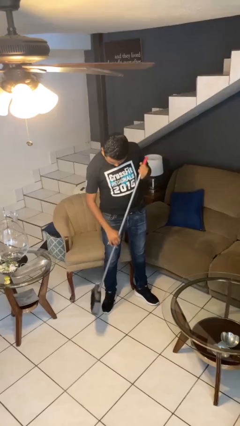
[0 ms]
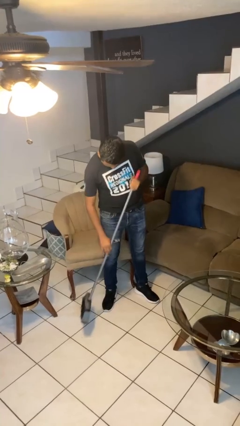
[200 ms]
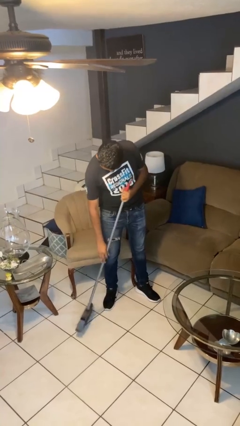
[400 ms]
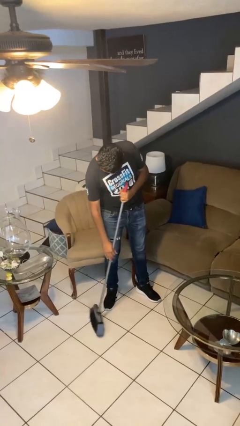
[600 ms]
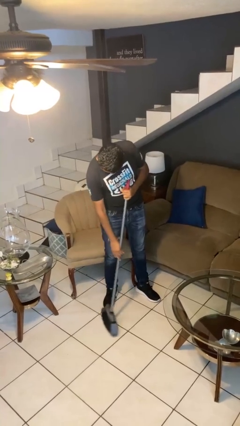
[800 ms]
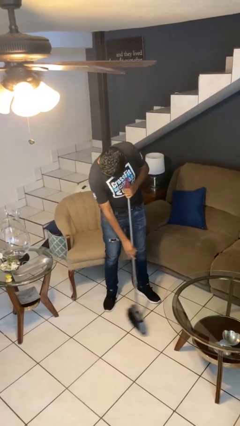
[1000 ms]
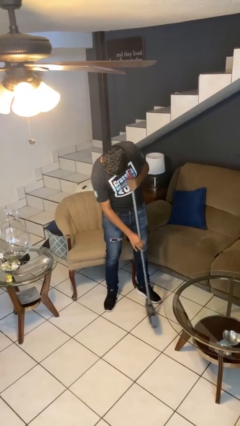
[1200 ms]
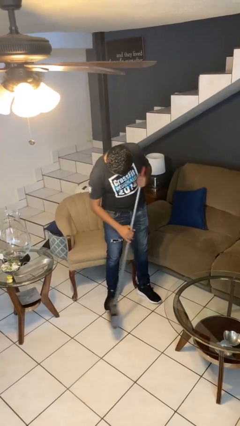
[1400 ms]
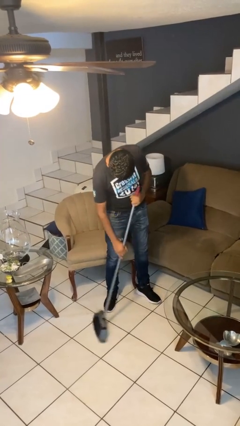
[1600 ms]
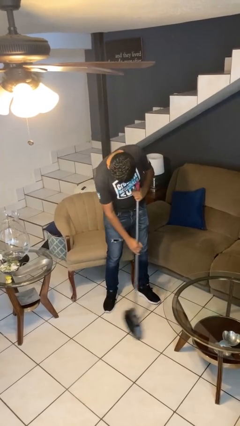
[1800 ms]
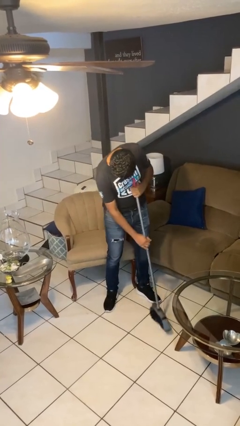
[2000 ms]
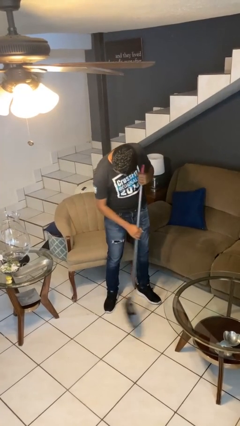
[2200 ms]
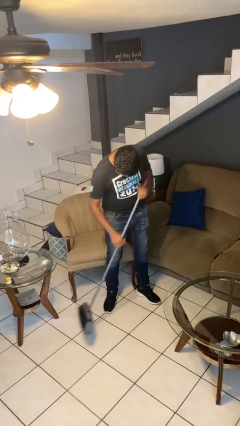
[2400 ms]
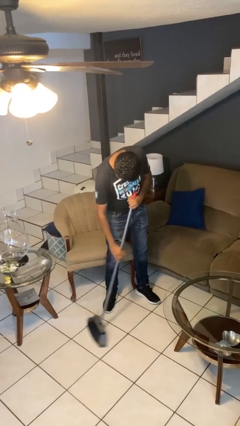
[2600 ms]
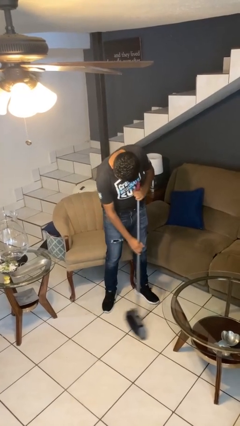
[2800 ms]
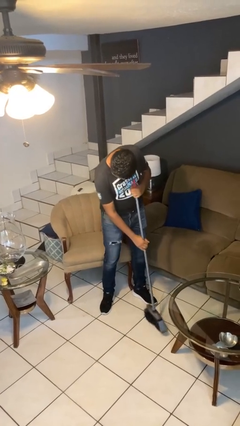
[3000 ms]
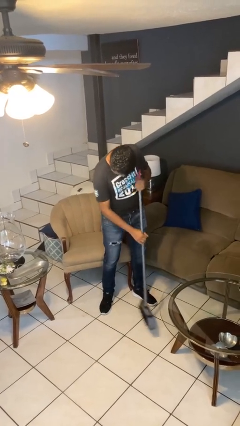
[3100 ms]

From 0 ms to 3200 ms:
person sweeps floor

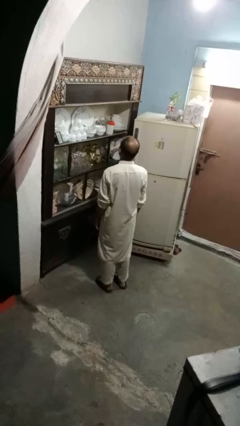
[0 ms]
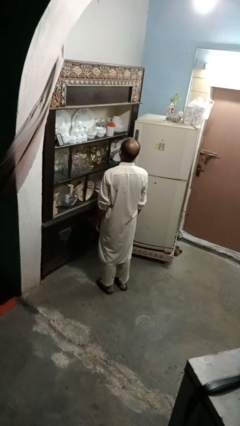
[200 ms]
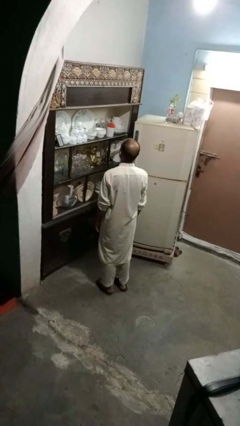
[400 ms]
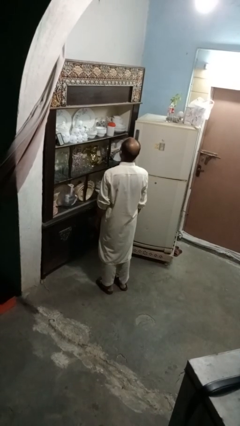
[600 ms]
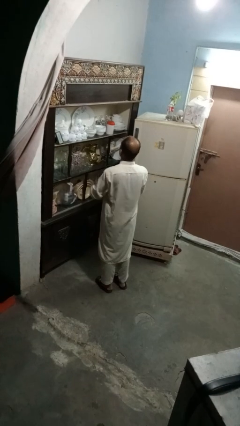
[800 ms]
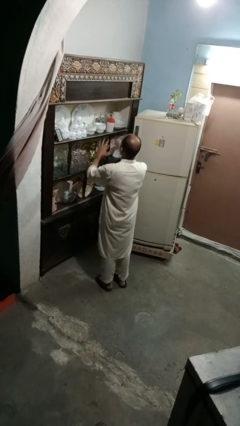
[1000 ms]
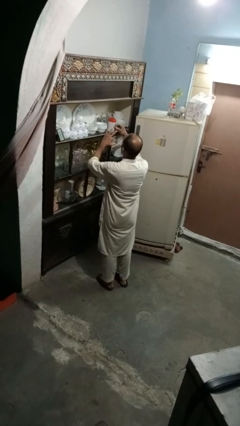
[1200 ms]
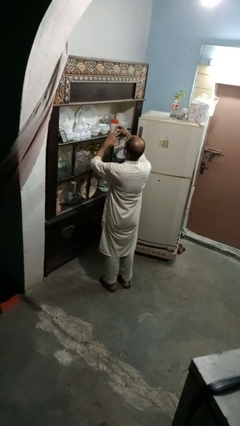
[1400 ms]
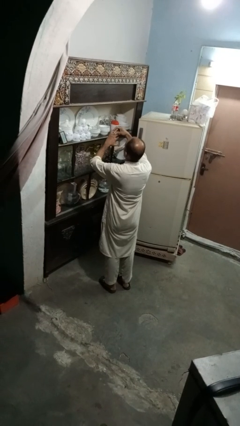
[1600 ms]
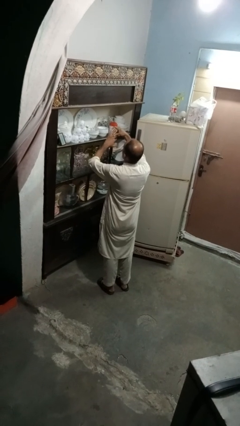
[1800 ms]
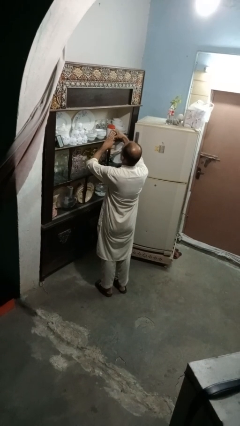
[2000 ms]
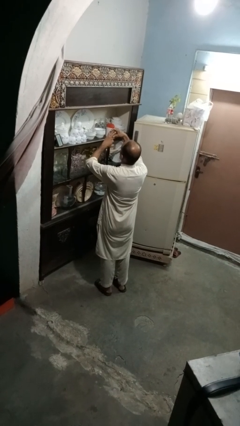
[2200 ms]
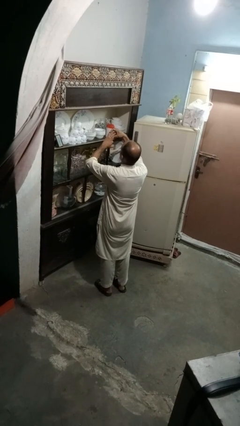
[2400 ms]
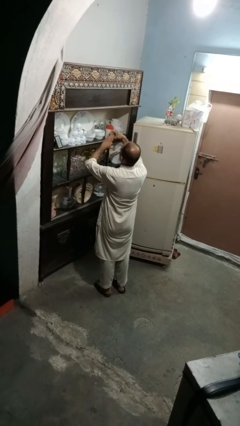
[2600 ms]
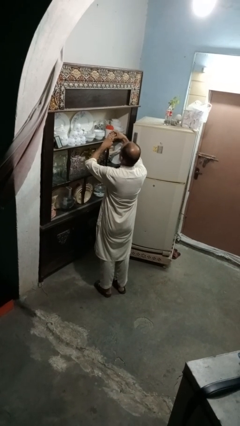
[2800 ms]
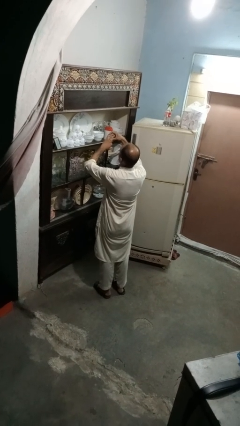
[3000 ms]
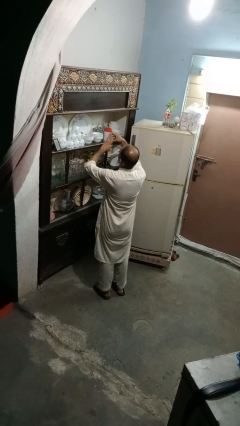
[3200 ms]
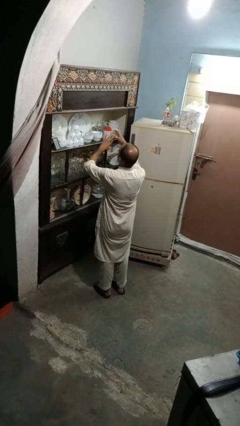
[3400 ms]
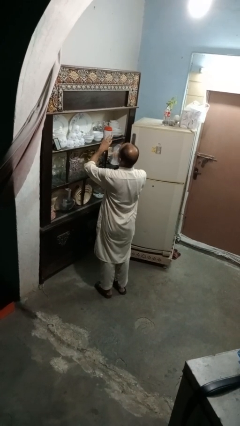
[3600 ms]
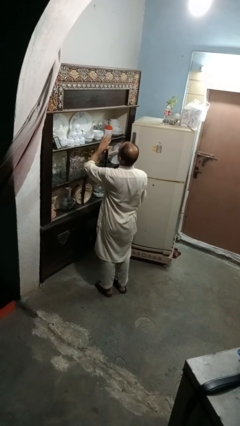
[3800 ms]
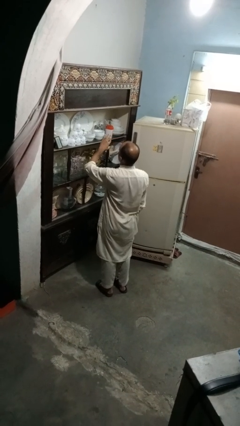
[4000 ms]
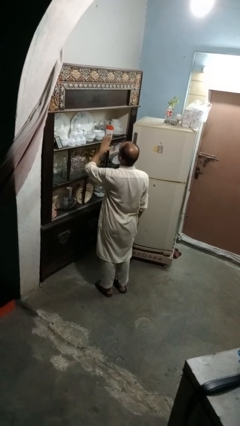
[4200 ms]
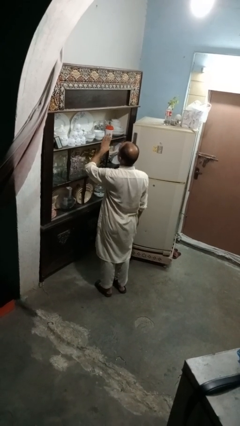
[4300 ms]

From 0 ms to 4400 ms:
person puts on ring

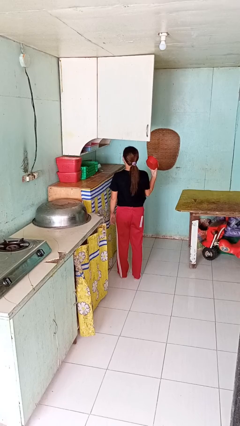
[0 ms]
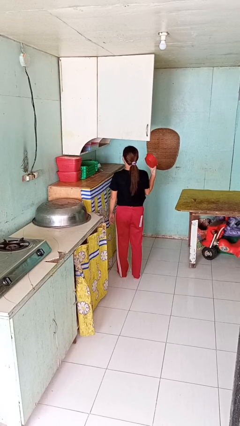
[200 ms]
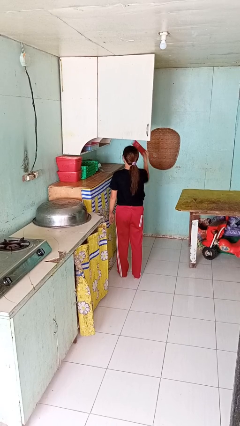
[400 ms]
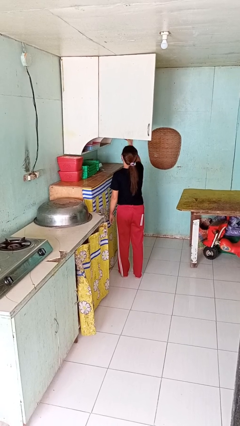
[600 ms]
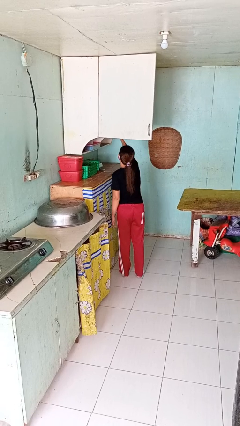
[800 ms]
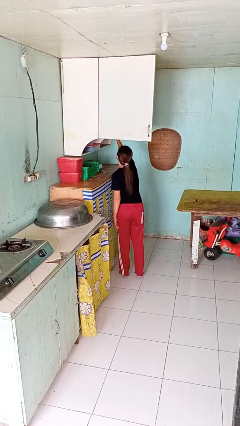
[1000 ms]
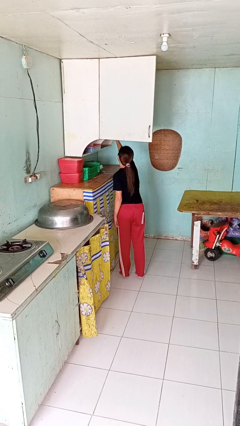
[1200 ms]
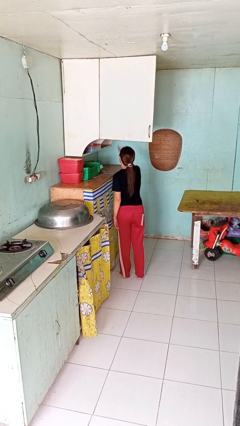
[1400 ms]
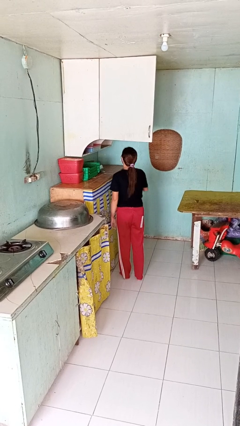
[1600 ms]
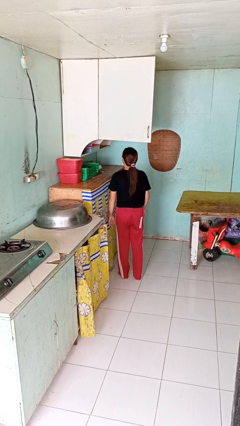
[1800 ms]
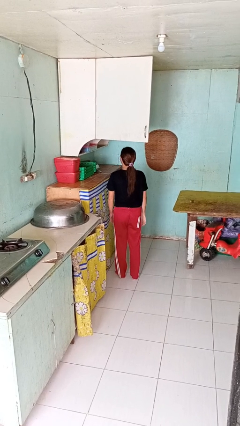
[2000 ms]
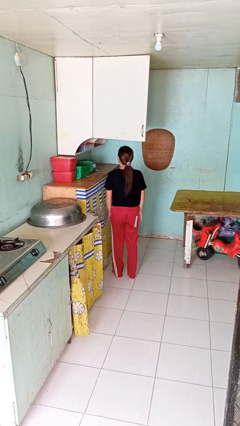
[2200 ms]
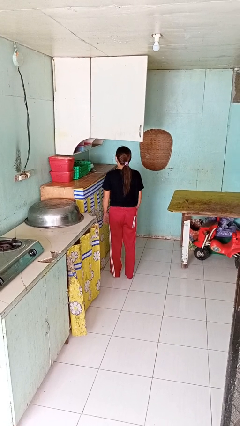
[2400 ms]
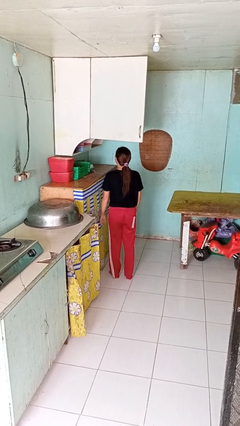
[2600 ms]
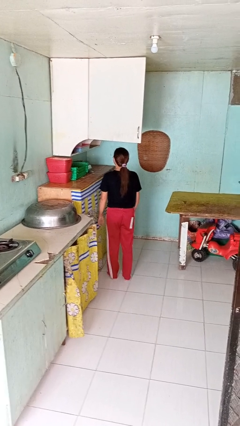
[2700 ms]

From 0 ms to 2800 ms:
person puts object in cabinet

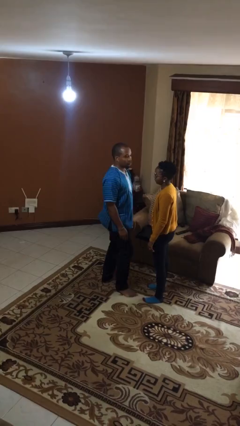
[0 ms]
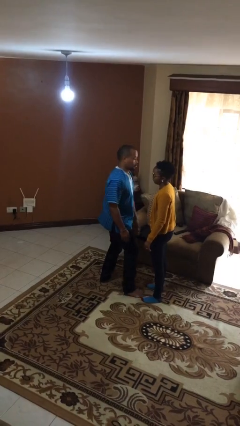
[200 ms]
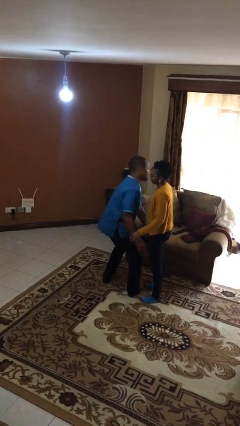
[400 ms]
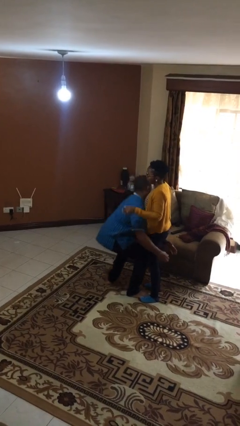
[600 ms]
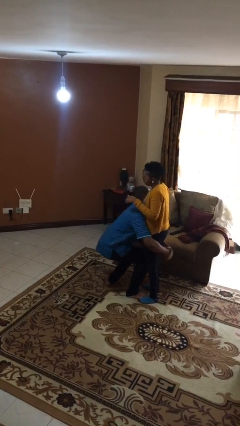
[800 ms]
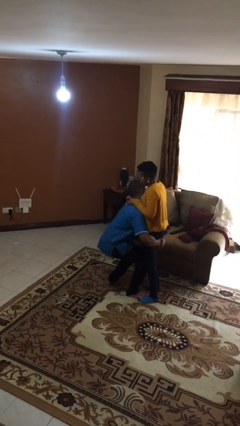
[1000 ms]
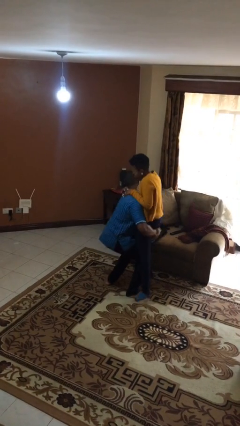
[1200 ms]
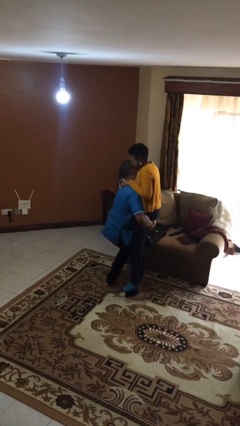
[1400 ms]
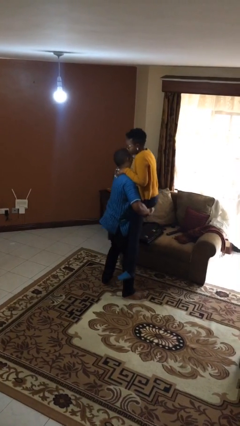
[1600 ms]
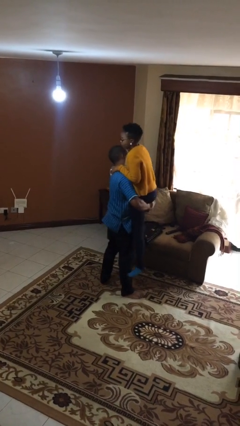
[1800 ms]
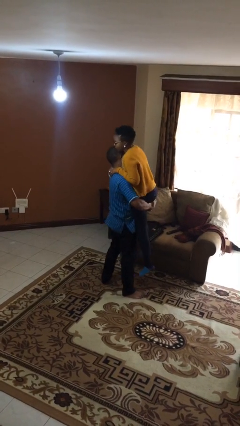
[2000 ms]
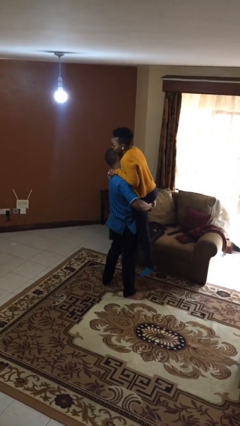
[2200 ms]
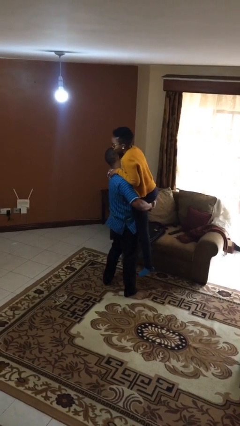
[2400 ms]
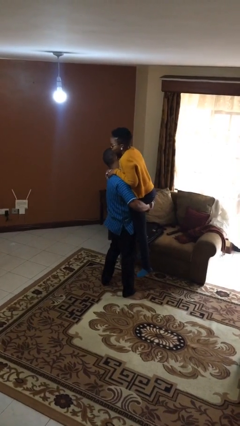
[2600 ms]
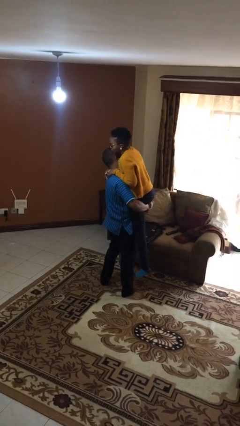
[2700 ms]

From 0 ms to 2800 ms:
person picks up person

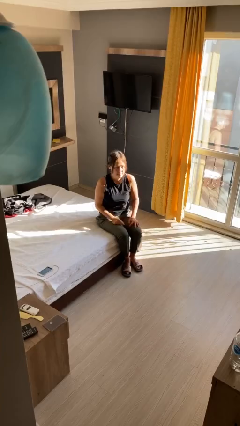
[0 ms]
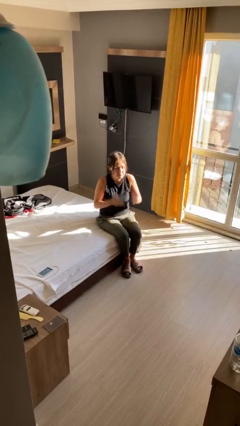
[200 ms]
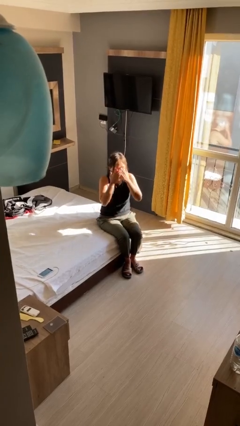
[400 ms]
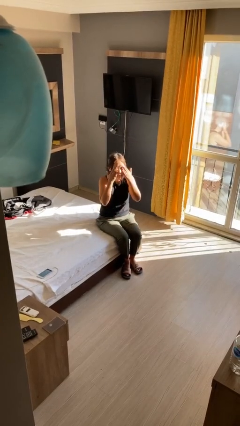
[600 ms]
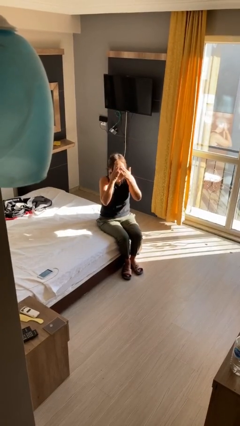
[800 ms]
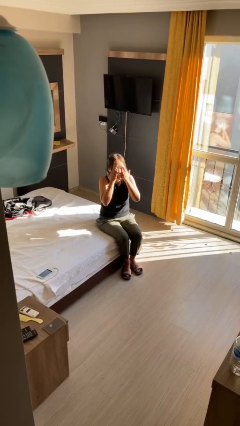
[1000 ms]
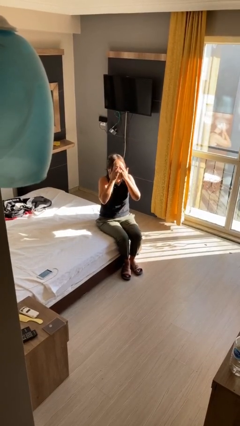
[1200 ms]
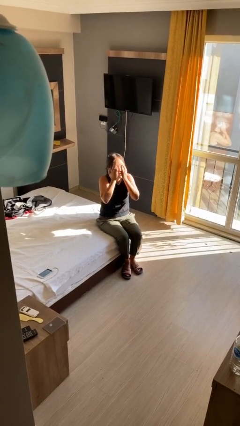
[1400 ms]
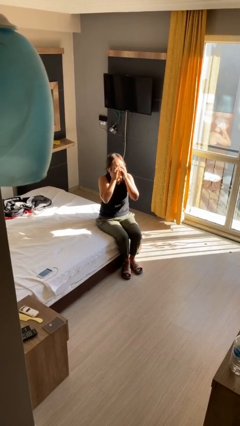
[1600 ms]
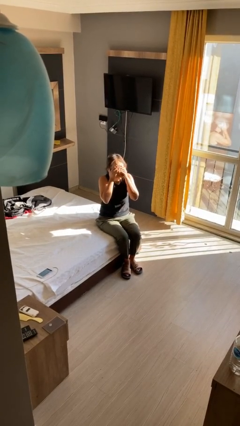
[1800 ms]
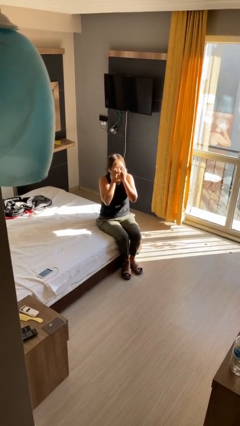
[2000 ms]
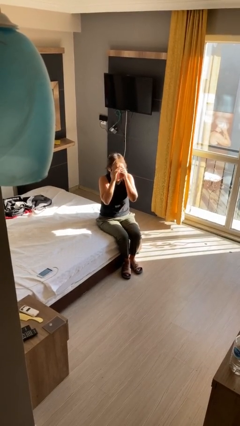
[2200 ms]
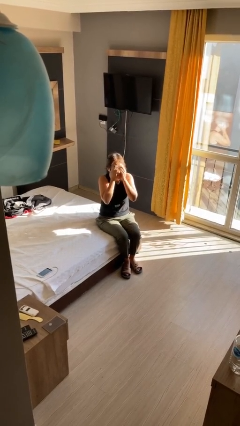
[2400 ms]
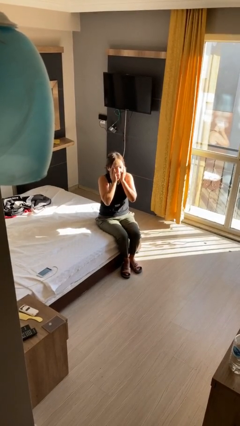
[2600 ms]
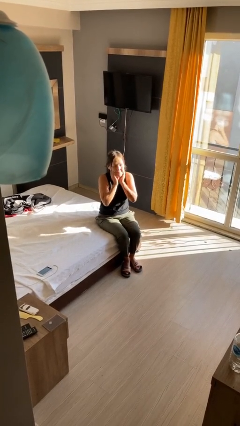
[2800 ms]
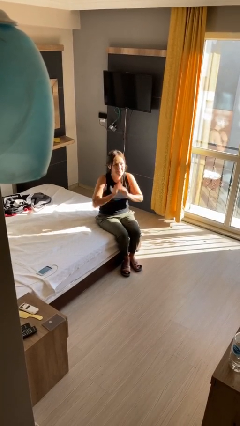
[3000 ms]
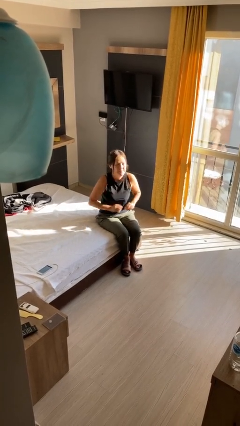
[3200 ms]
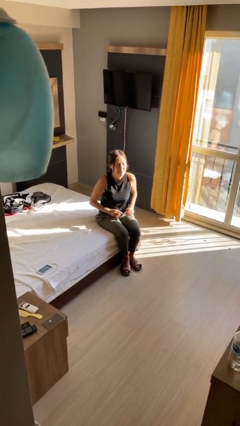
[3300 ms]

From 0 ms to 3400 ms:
person rubs eyes

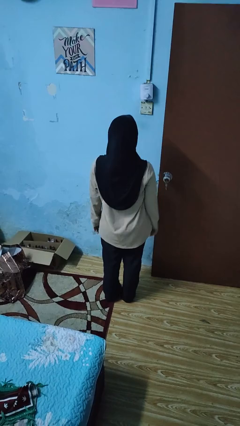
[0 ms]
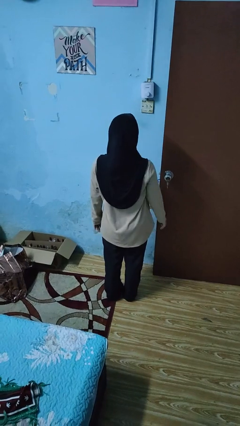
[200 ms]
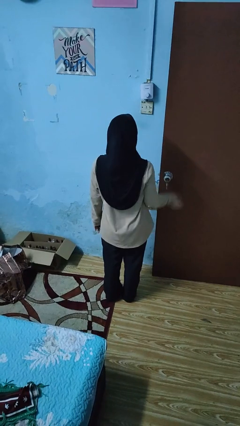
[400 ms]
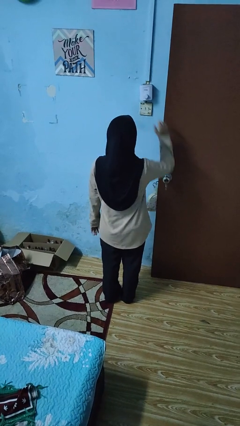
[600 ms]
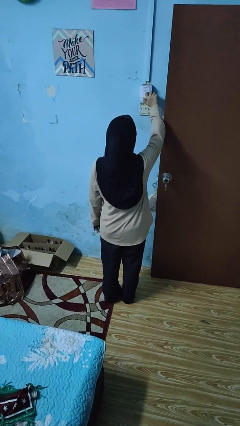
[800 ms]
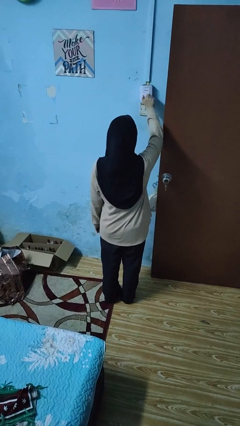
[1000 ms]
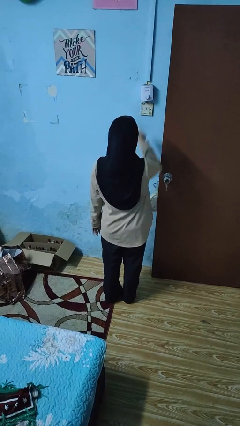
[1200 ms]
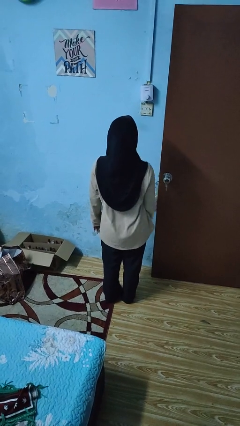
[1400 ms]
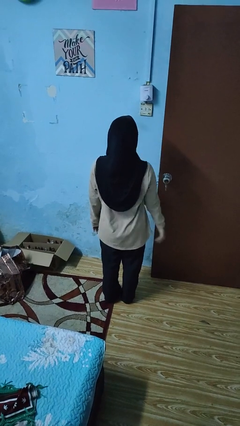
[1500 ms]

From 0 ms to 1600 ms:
person adjusts thermostat
